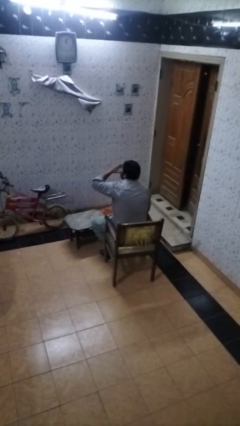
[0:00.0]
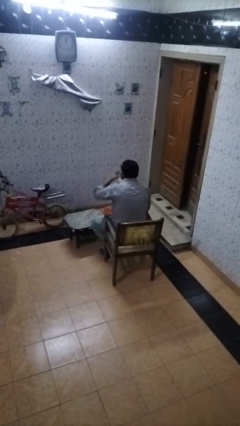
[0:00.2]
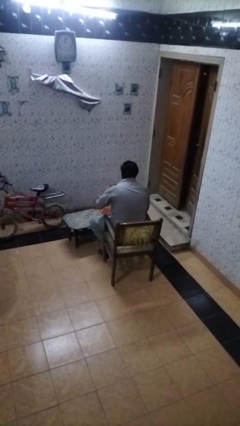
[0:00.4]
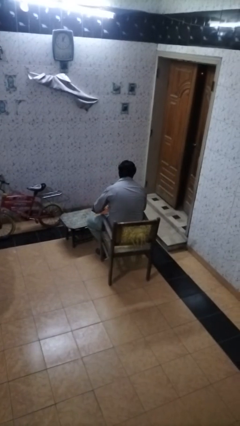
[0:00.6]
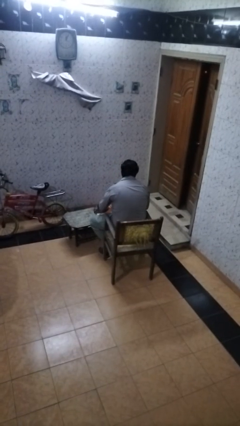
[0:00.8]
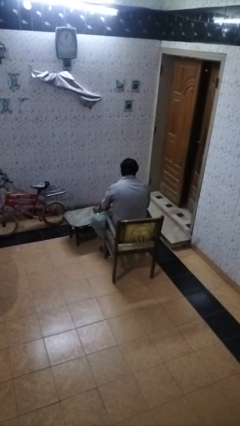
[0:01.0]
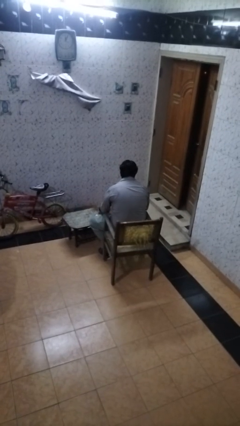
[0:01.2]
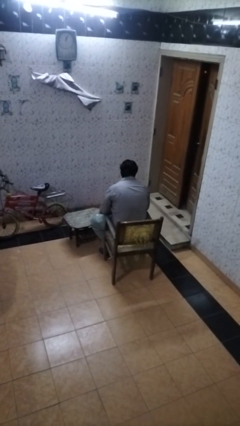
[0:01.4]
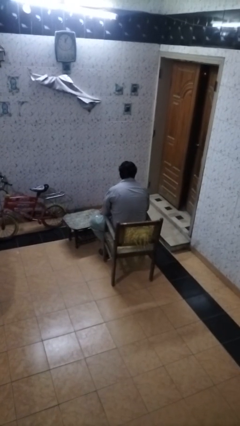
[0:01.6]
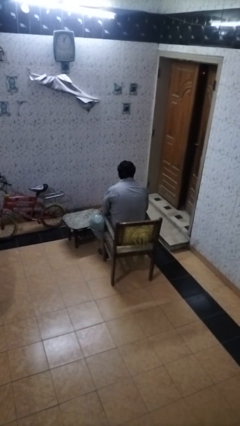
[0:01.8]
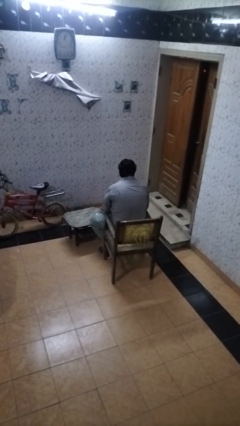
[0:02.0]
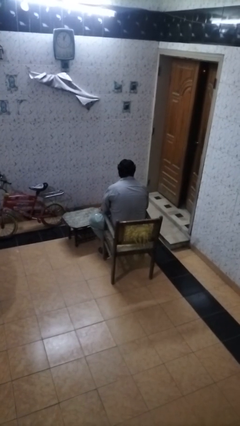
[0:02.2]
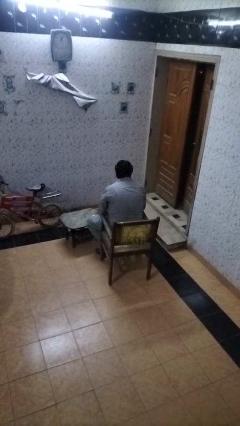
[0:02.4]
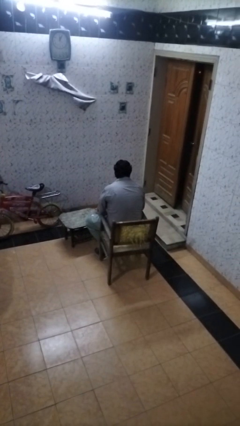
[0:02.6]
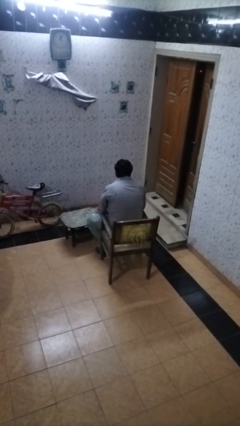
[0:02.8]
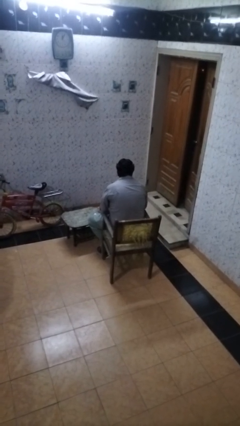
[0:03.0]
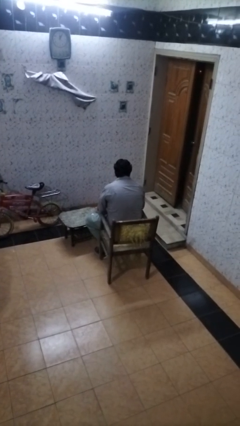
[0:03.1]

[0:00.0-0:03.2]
person puts down object on table

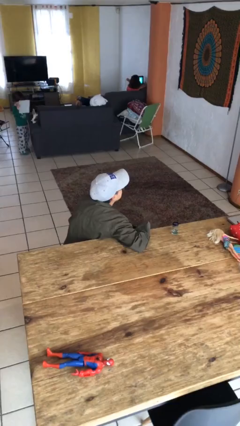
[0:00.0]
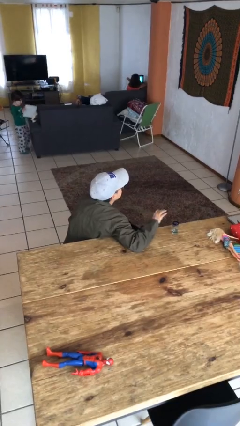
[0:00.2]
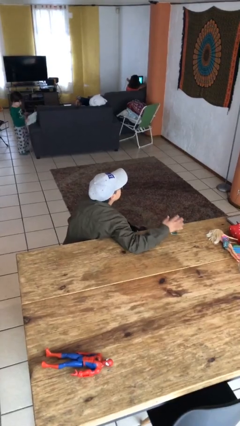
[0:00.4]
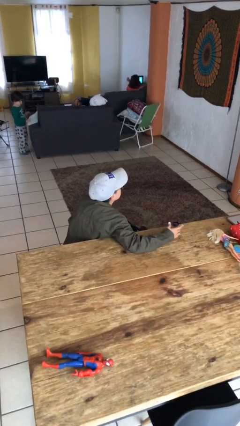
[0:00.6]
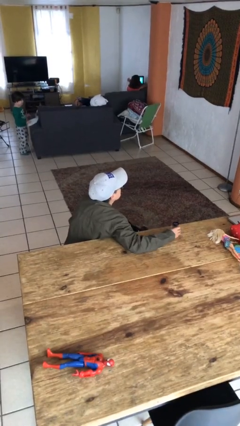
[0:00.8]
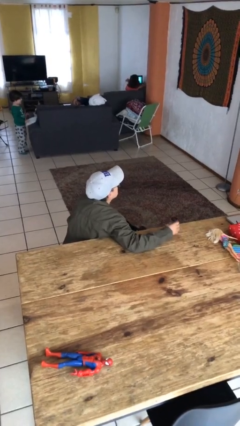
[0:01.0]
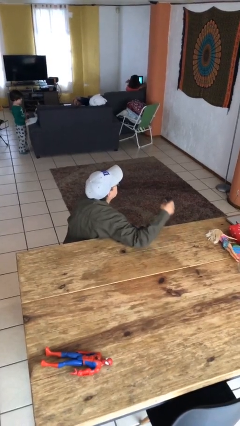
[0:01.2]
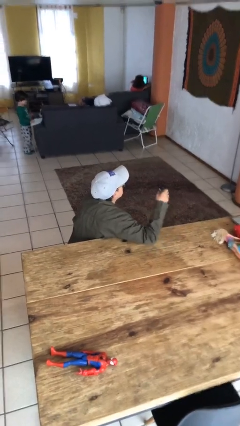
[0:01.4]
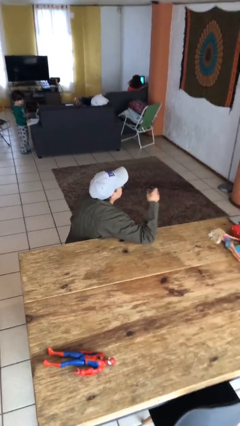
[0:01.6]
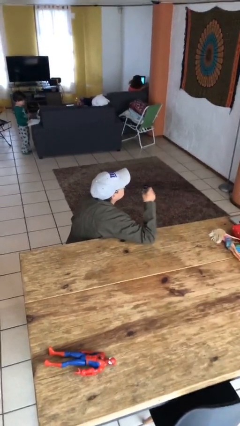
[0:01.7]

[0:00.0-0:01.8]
person picks up object from table

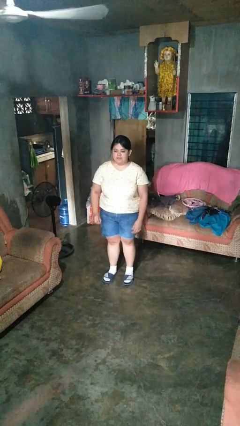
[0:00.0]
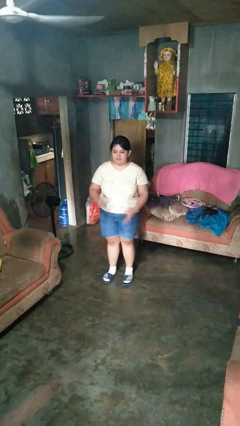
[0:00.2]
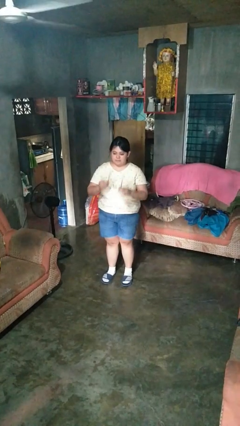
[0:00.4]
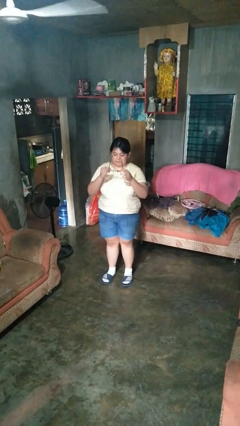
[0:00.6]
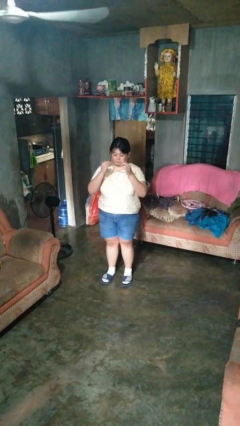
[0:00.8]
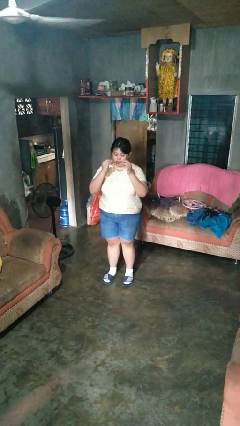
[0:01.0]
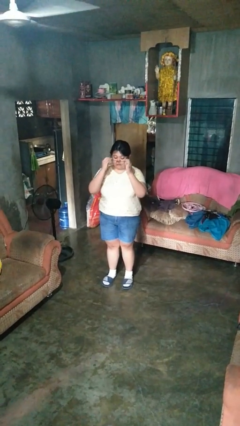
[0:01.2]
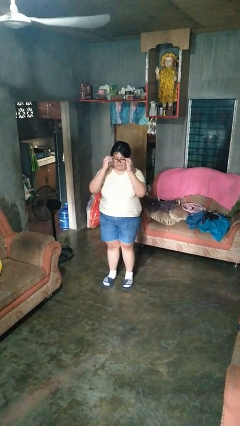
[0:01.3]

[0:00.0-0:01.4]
person puts on glasses

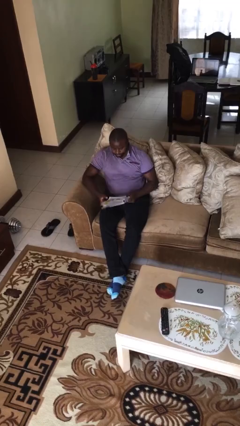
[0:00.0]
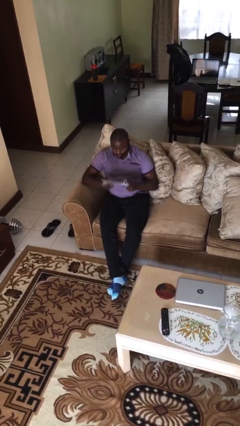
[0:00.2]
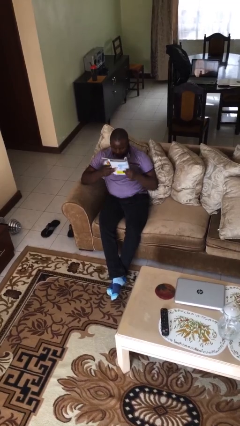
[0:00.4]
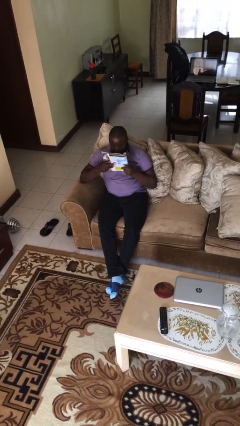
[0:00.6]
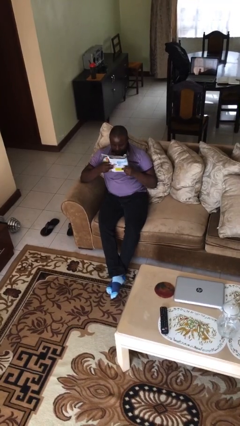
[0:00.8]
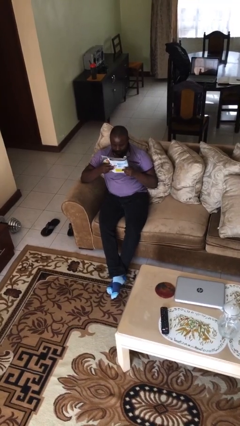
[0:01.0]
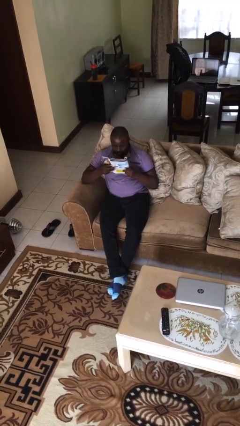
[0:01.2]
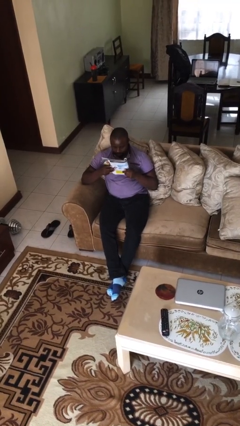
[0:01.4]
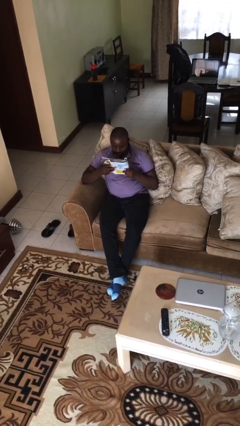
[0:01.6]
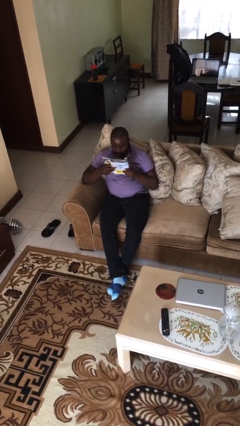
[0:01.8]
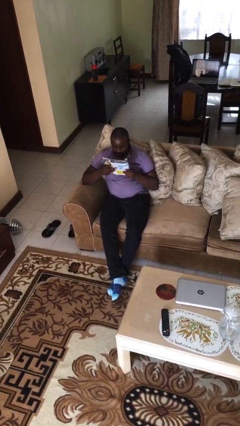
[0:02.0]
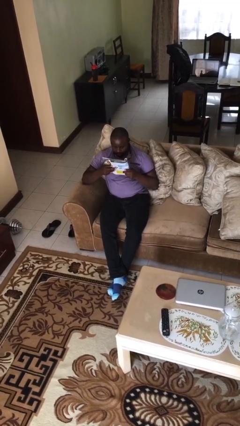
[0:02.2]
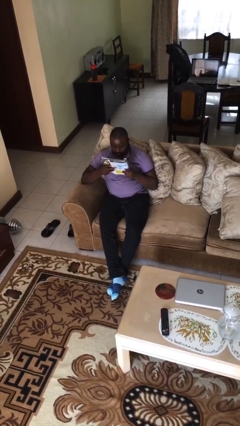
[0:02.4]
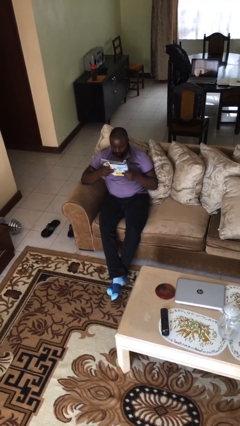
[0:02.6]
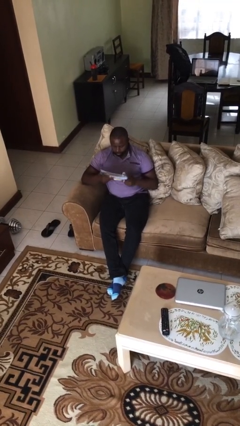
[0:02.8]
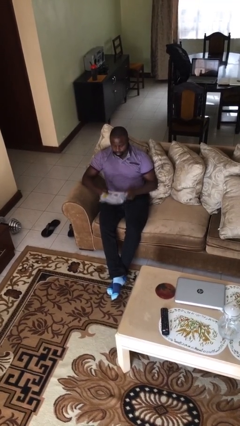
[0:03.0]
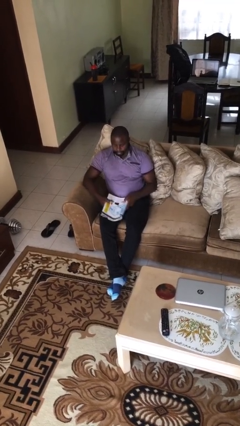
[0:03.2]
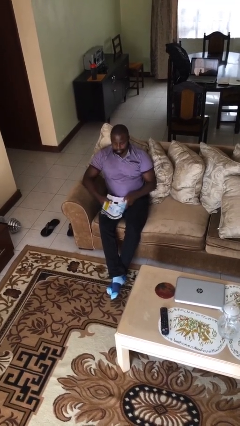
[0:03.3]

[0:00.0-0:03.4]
person reads document

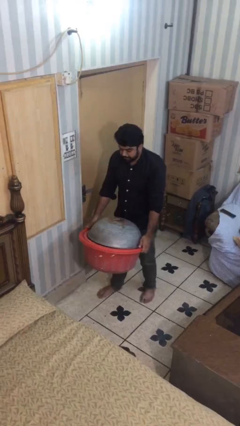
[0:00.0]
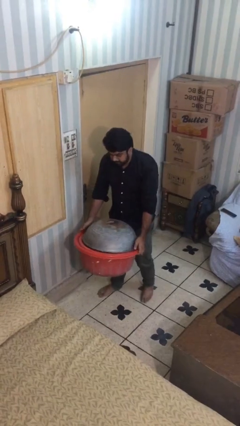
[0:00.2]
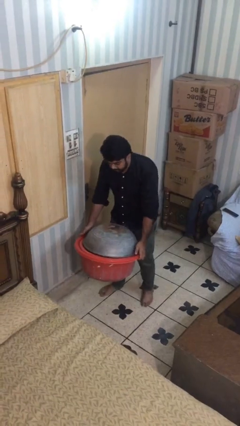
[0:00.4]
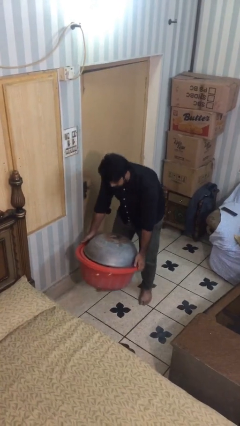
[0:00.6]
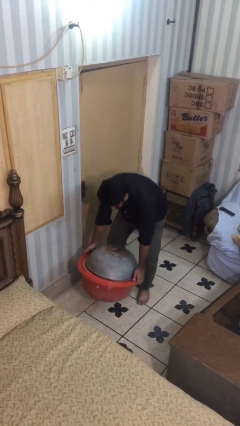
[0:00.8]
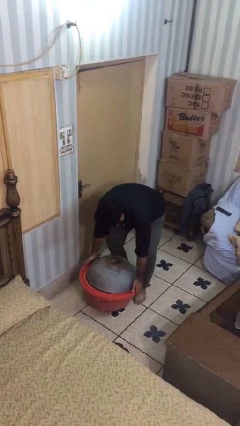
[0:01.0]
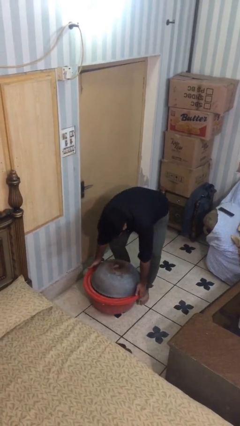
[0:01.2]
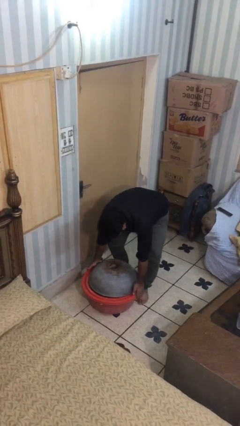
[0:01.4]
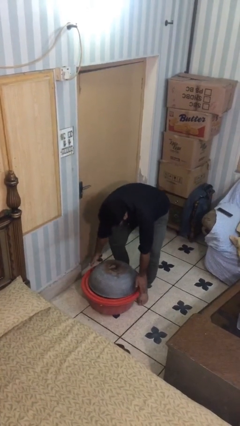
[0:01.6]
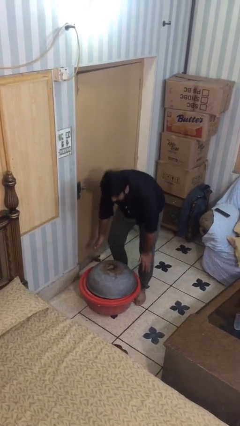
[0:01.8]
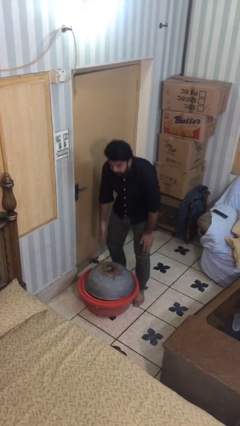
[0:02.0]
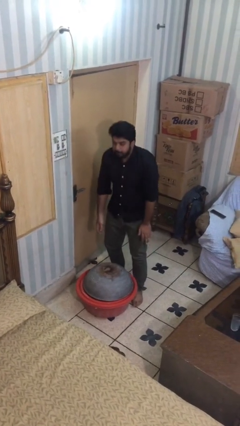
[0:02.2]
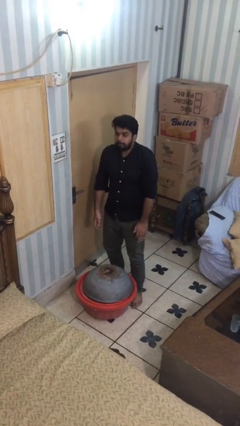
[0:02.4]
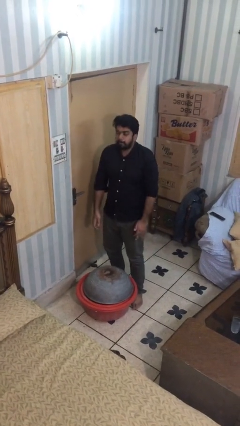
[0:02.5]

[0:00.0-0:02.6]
person puts down object on floor

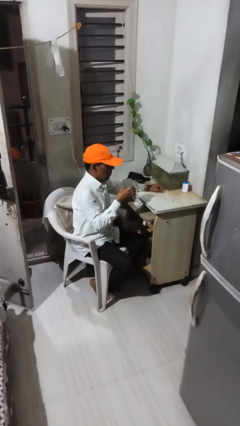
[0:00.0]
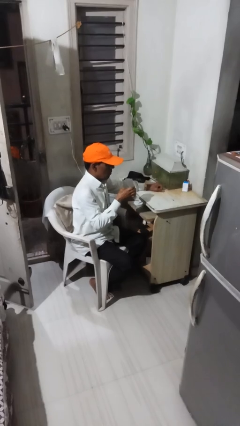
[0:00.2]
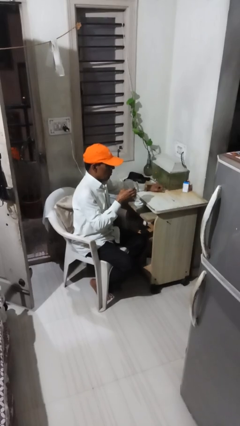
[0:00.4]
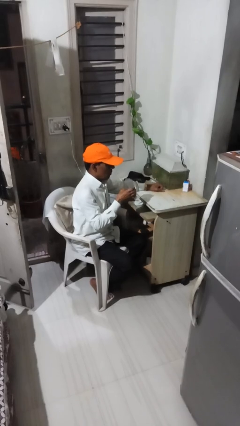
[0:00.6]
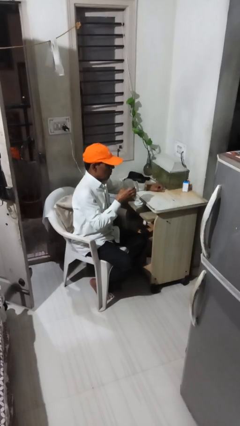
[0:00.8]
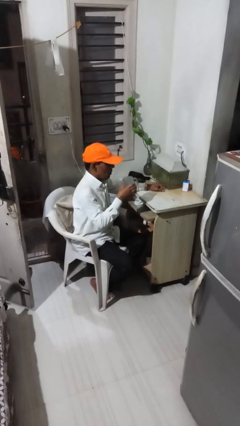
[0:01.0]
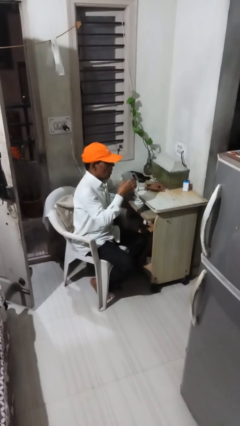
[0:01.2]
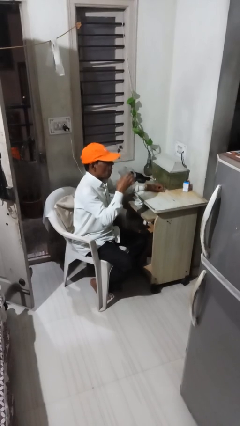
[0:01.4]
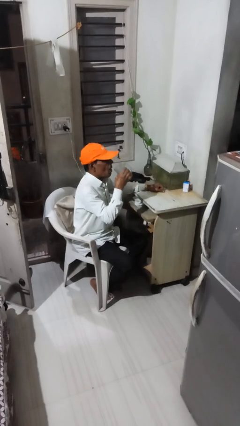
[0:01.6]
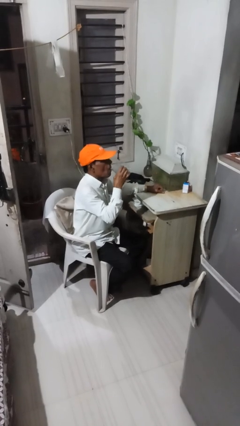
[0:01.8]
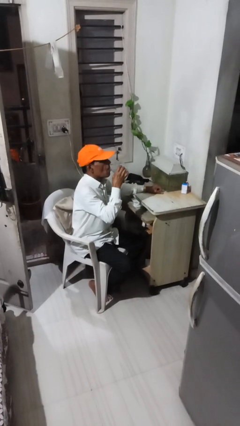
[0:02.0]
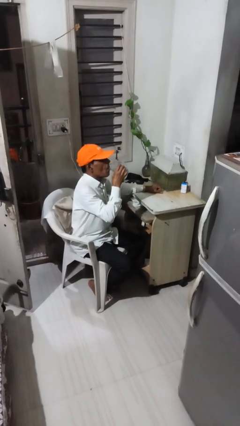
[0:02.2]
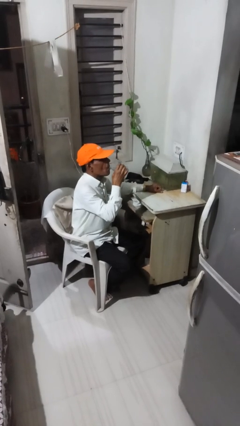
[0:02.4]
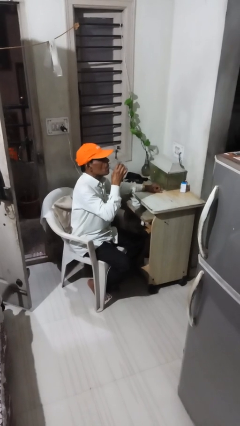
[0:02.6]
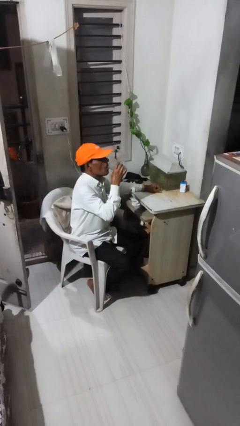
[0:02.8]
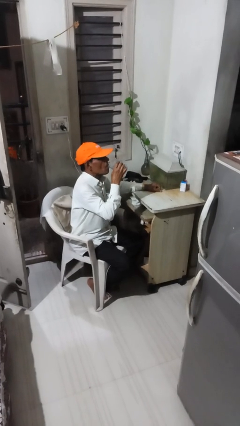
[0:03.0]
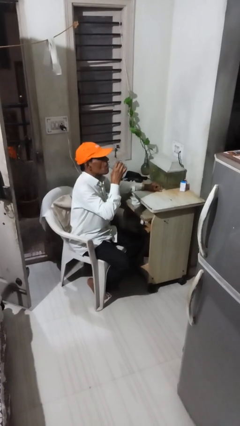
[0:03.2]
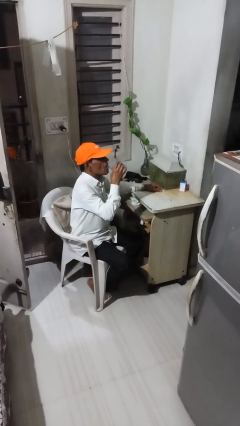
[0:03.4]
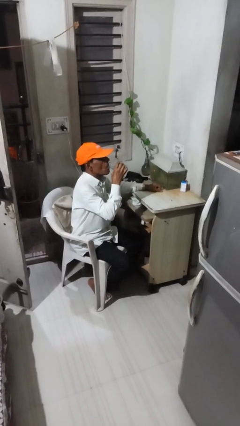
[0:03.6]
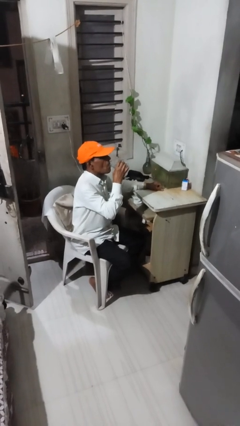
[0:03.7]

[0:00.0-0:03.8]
person drinks from mug

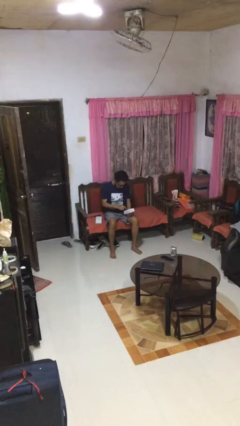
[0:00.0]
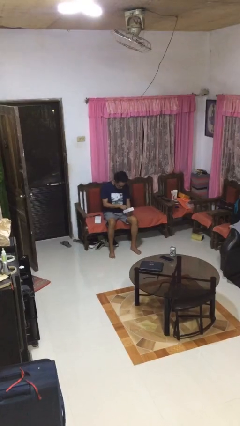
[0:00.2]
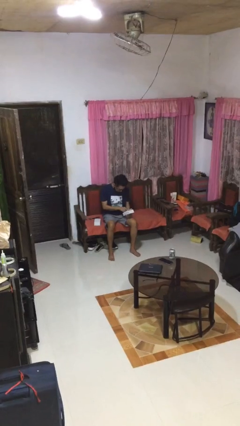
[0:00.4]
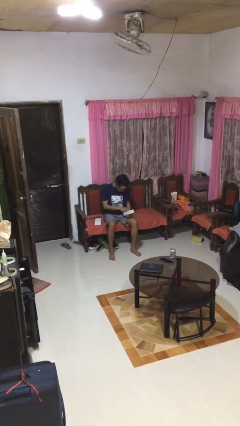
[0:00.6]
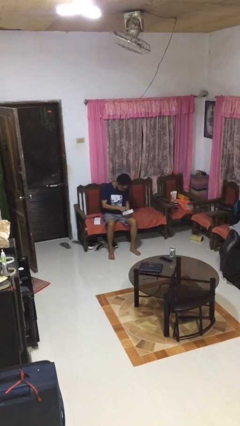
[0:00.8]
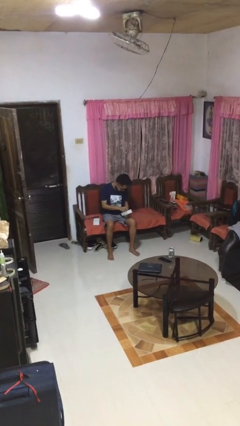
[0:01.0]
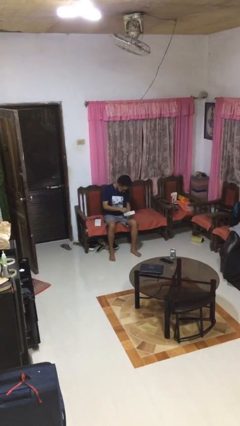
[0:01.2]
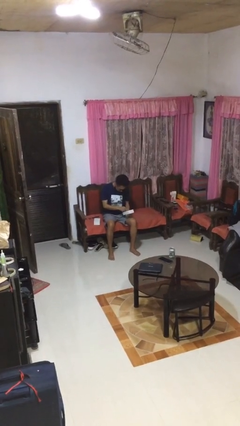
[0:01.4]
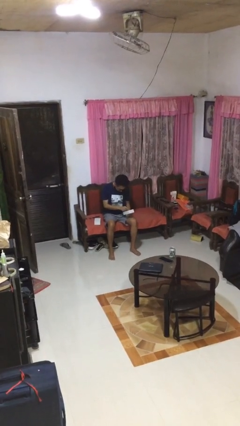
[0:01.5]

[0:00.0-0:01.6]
person searches jewelry box
